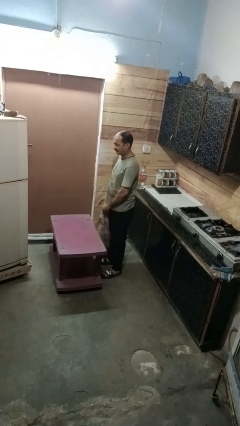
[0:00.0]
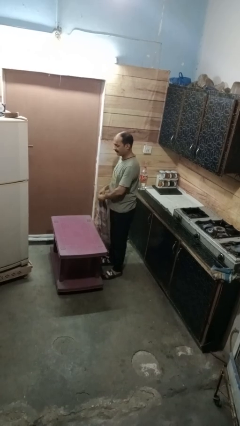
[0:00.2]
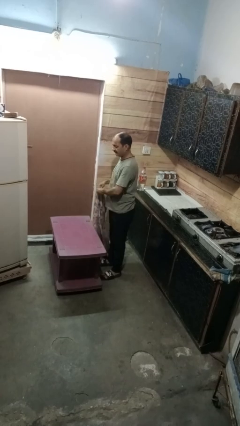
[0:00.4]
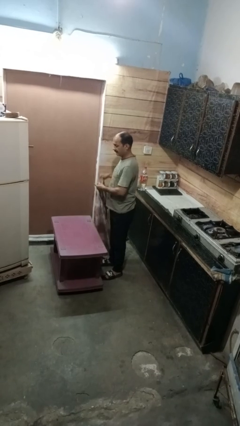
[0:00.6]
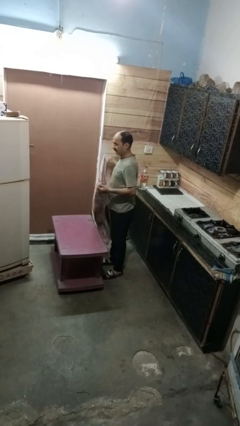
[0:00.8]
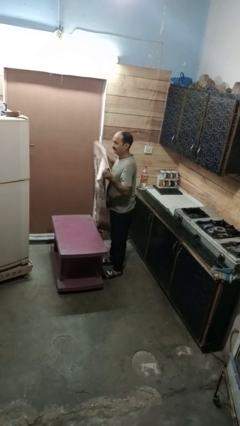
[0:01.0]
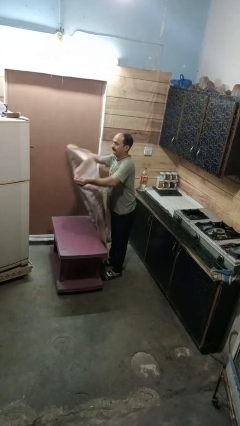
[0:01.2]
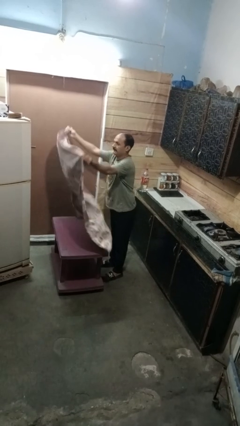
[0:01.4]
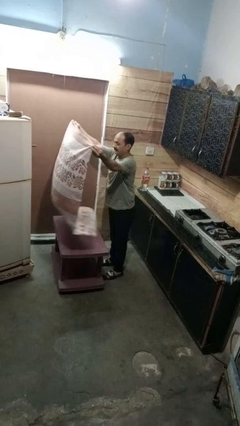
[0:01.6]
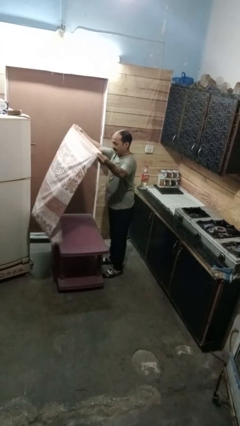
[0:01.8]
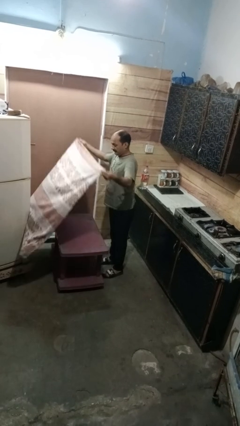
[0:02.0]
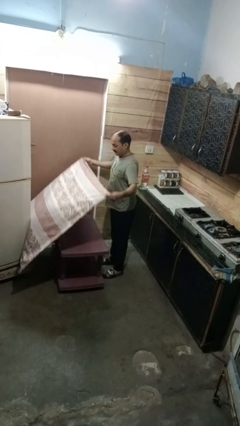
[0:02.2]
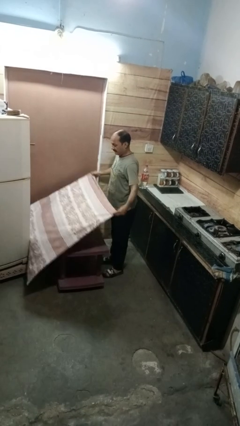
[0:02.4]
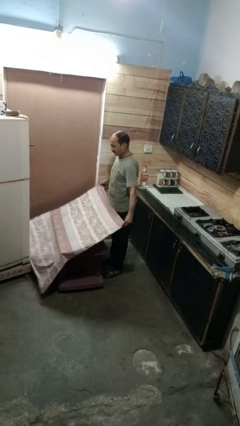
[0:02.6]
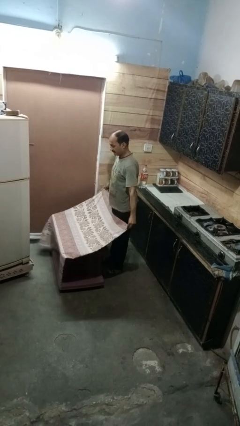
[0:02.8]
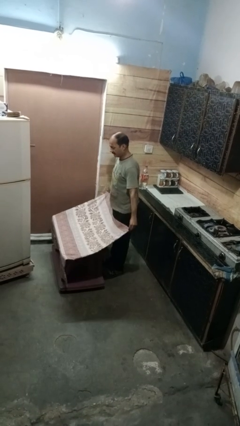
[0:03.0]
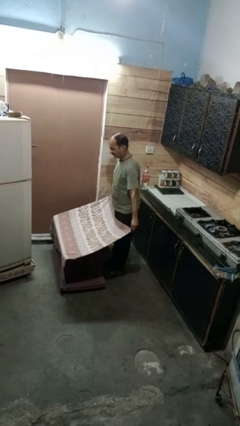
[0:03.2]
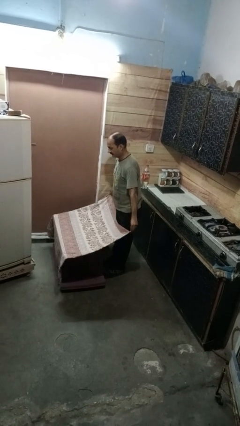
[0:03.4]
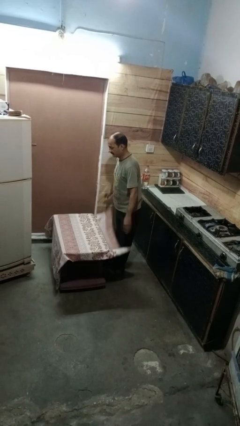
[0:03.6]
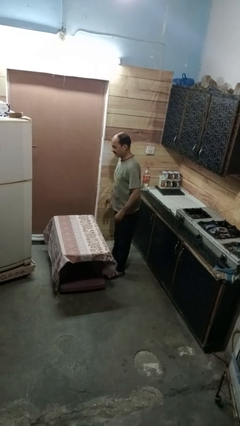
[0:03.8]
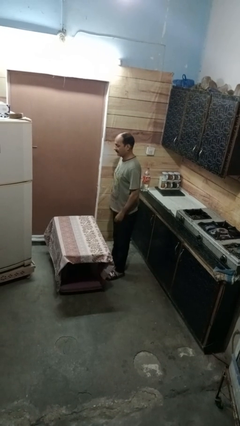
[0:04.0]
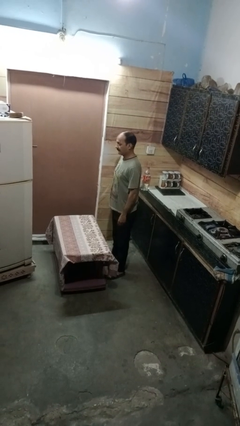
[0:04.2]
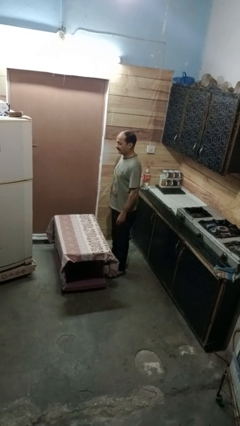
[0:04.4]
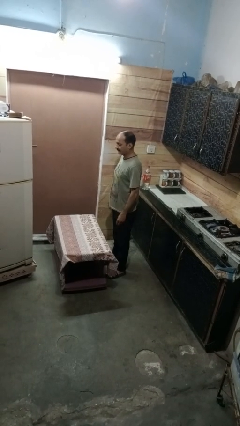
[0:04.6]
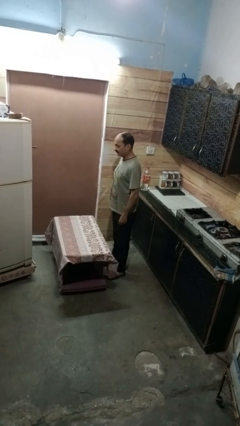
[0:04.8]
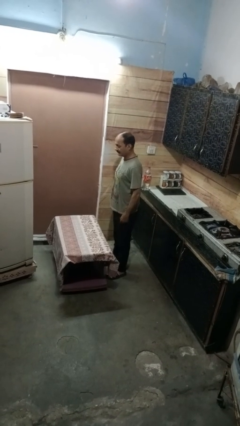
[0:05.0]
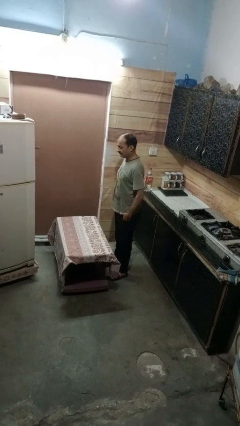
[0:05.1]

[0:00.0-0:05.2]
person spreads tablecloth

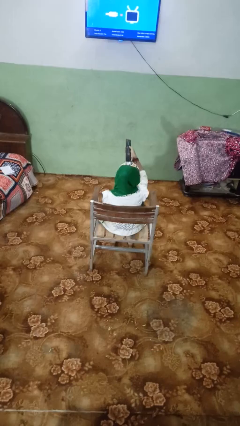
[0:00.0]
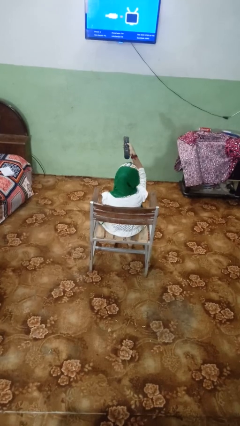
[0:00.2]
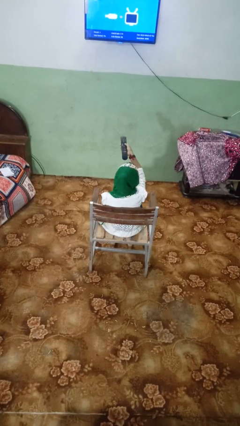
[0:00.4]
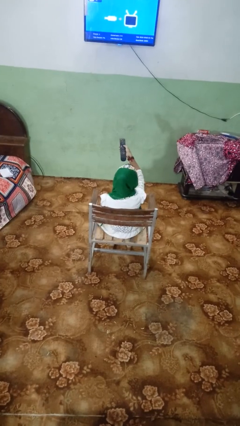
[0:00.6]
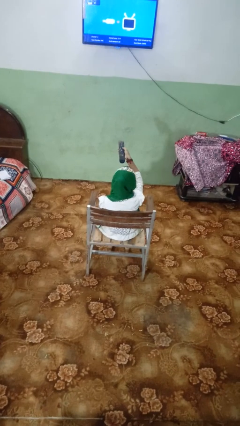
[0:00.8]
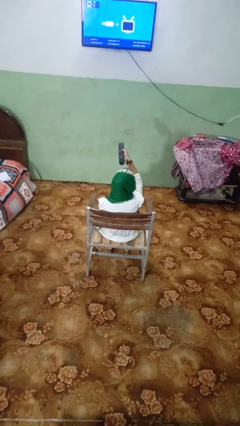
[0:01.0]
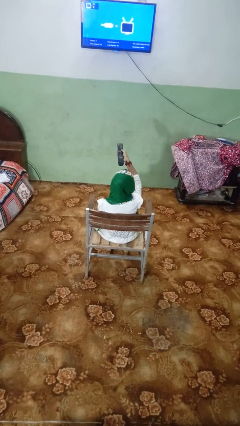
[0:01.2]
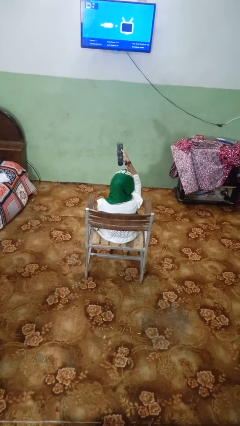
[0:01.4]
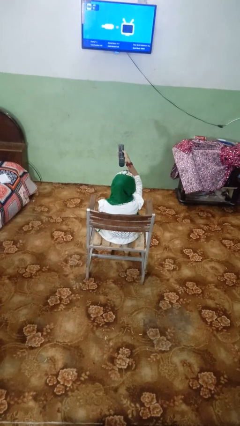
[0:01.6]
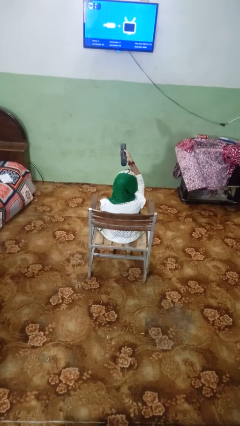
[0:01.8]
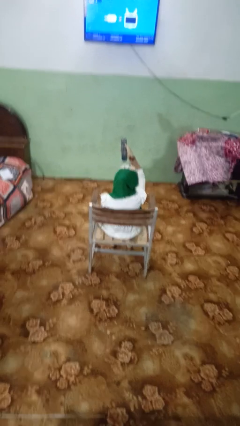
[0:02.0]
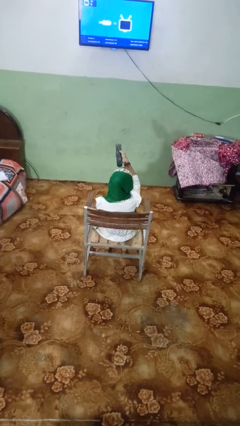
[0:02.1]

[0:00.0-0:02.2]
person uses television remote

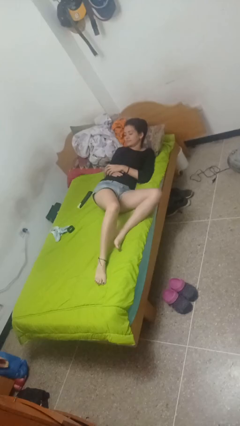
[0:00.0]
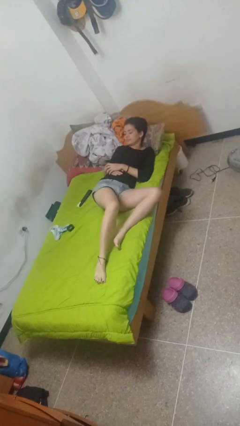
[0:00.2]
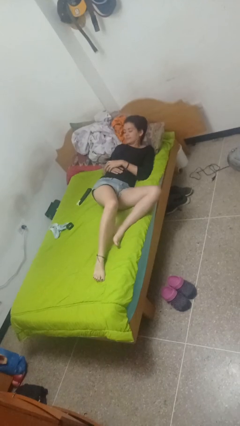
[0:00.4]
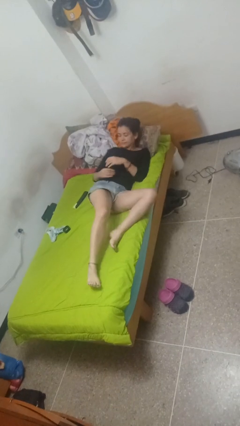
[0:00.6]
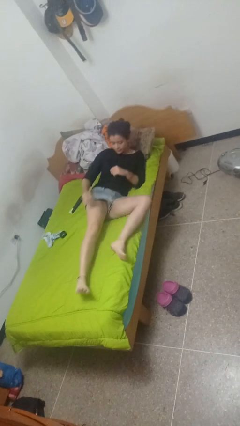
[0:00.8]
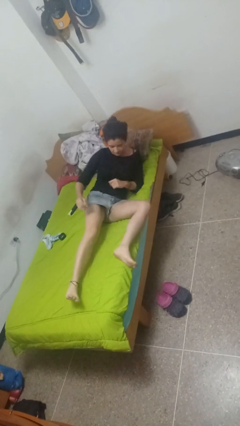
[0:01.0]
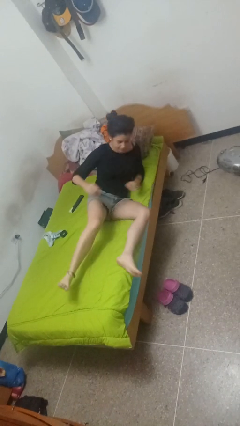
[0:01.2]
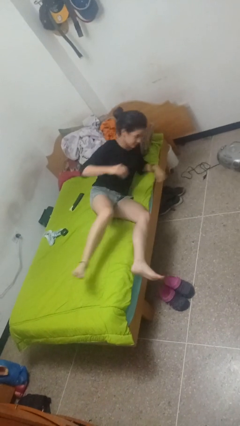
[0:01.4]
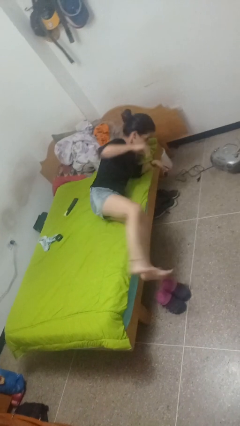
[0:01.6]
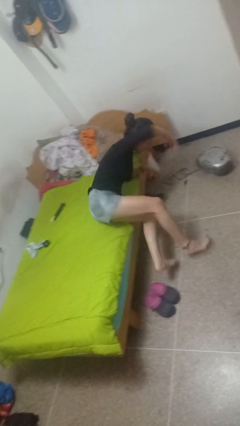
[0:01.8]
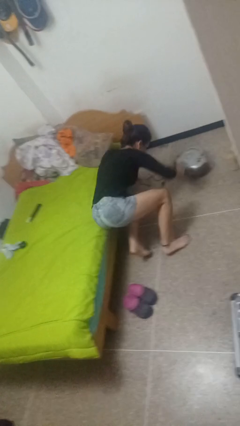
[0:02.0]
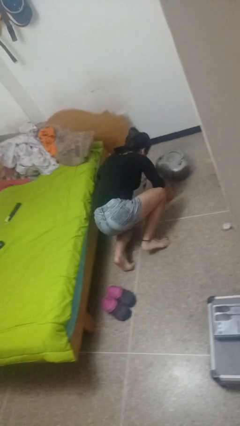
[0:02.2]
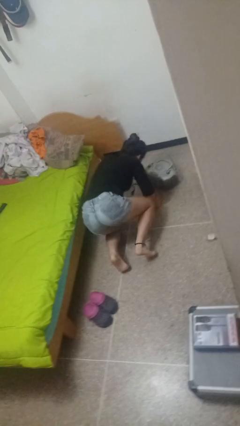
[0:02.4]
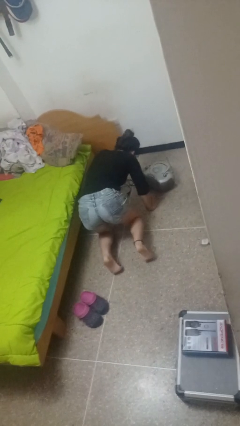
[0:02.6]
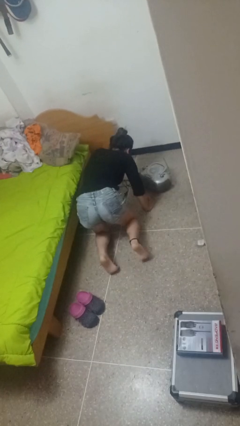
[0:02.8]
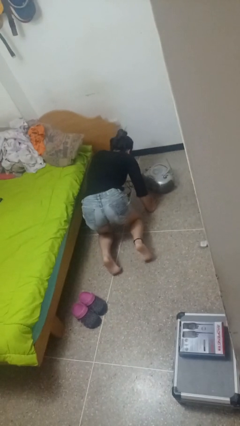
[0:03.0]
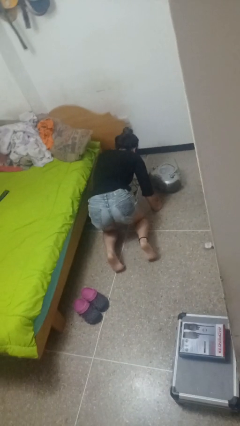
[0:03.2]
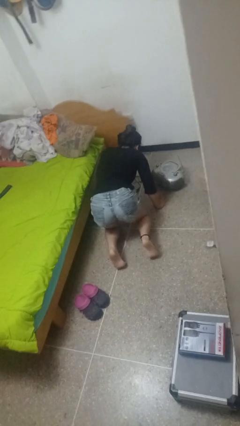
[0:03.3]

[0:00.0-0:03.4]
person falls from bed

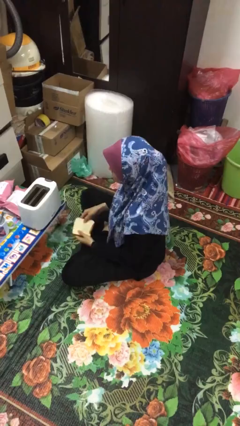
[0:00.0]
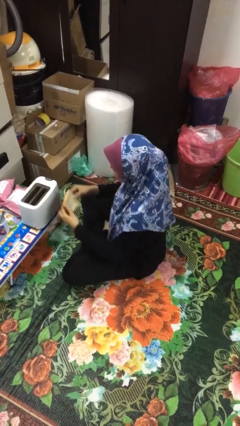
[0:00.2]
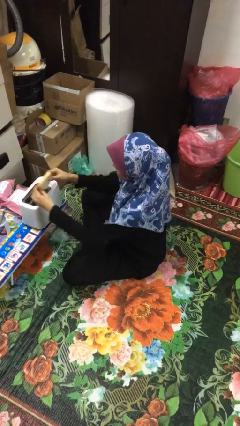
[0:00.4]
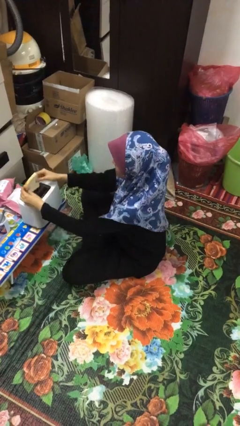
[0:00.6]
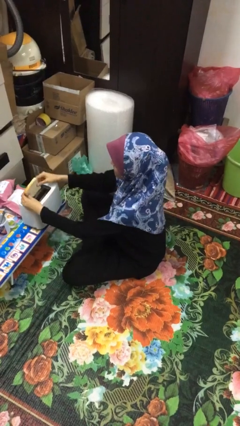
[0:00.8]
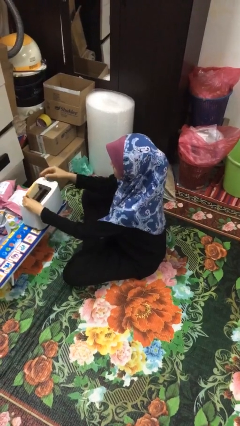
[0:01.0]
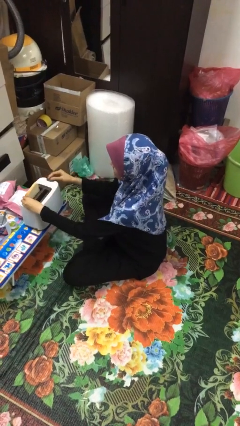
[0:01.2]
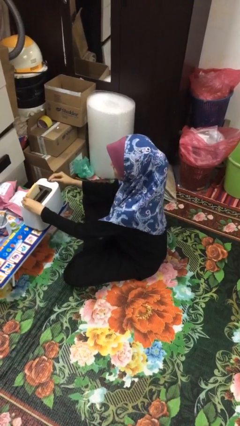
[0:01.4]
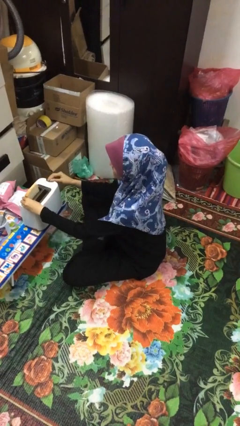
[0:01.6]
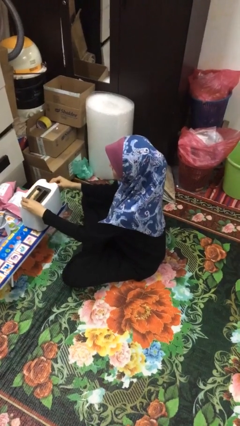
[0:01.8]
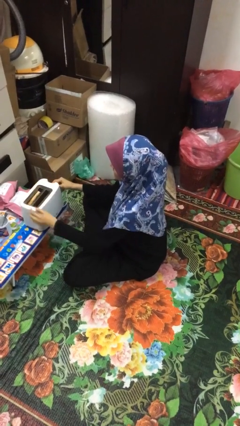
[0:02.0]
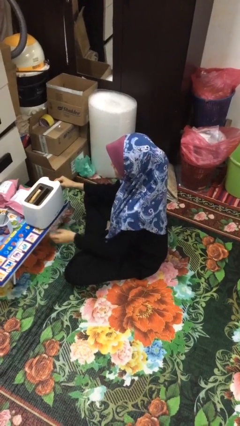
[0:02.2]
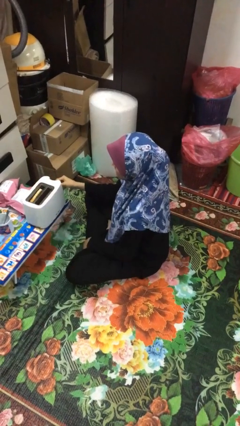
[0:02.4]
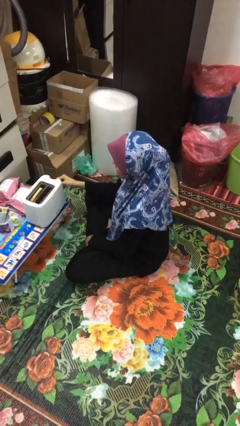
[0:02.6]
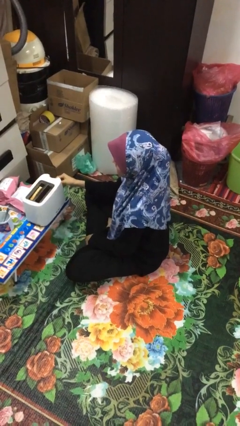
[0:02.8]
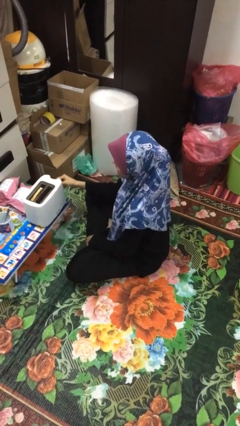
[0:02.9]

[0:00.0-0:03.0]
person puts object into toaster

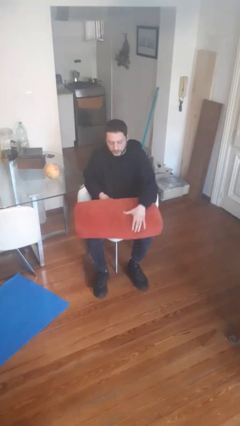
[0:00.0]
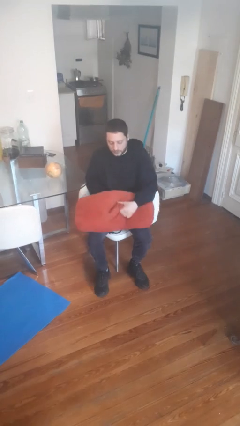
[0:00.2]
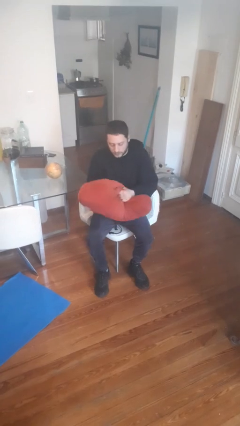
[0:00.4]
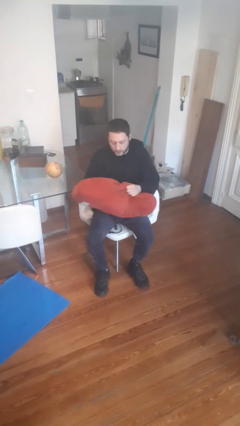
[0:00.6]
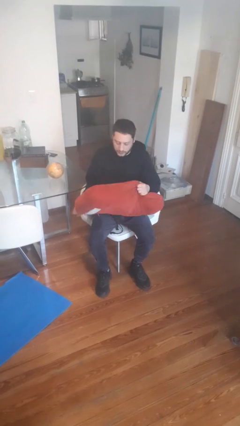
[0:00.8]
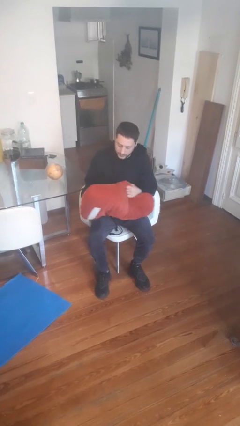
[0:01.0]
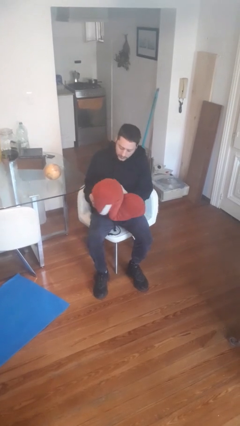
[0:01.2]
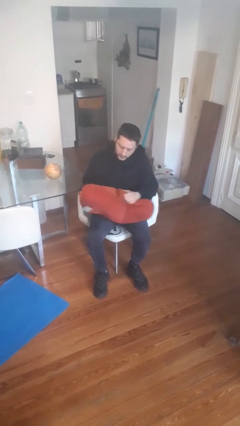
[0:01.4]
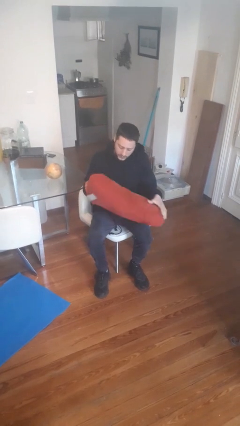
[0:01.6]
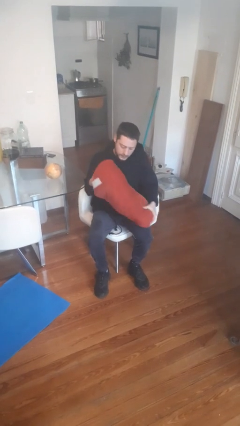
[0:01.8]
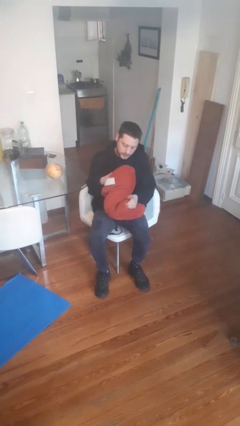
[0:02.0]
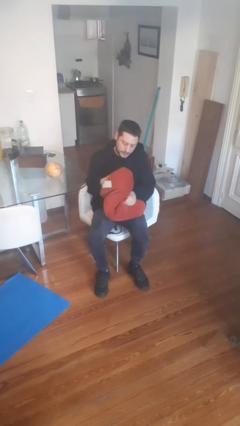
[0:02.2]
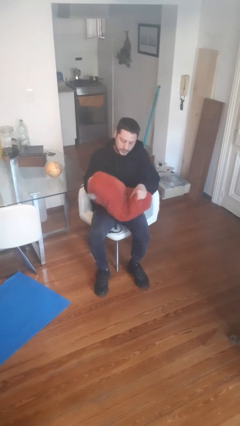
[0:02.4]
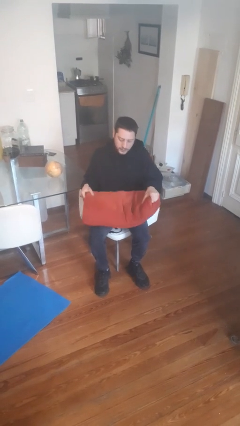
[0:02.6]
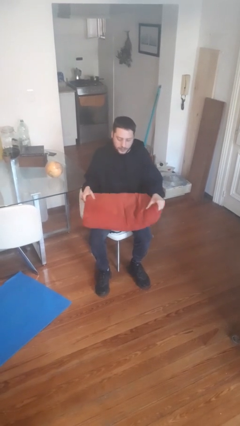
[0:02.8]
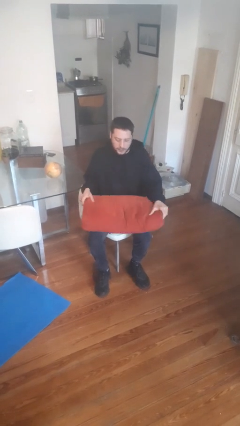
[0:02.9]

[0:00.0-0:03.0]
person squeezes object

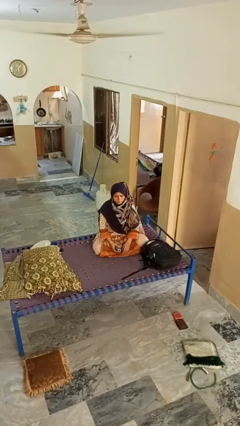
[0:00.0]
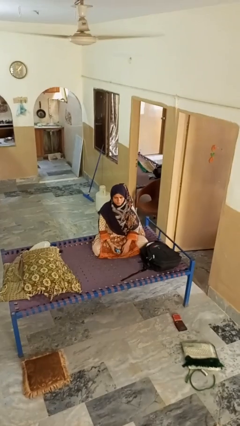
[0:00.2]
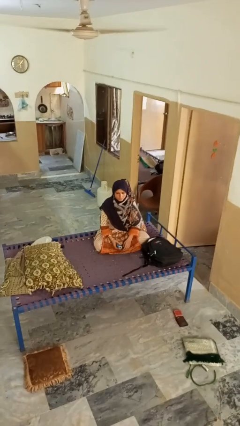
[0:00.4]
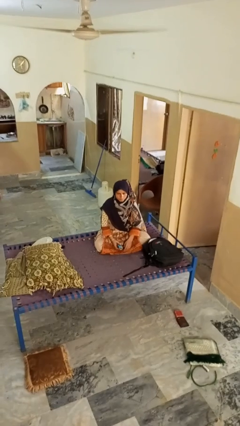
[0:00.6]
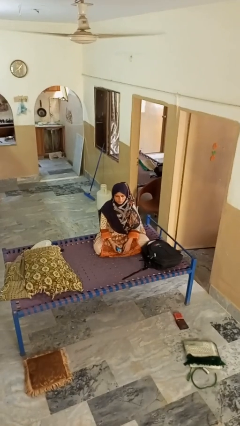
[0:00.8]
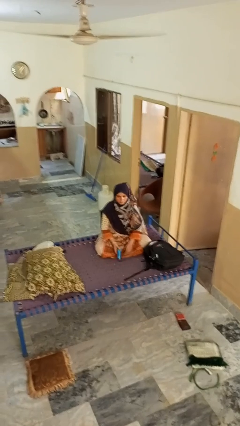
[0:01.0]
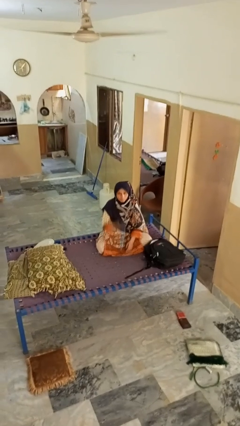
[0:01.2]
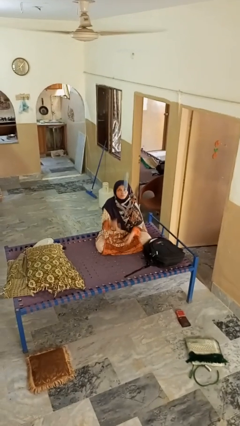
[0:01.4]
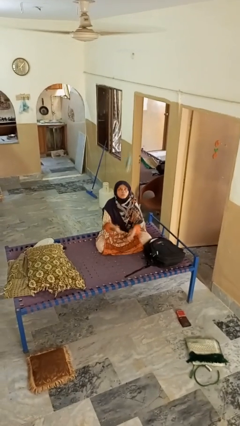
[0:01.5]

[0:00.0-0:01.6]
person drops object
